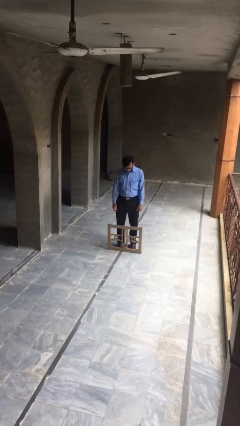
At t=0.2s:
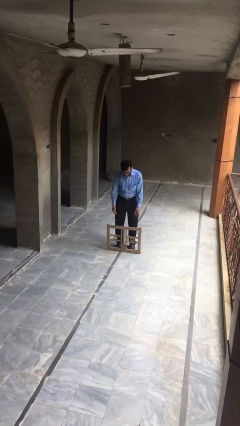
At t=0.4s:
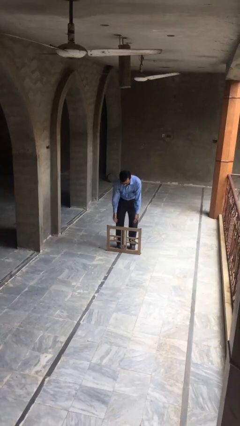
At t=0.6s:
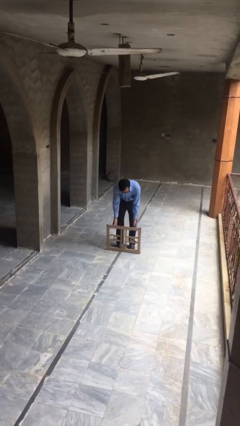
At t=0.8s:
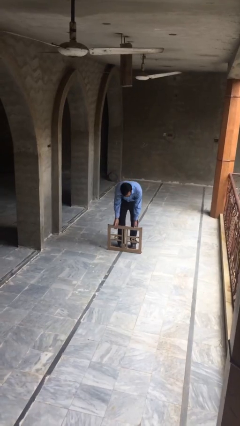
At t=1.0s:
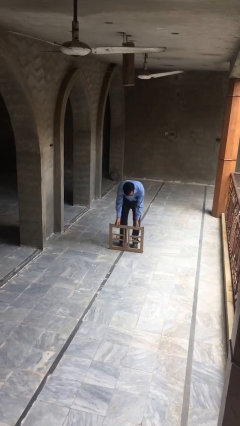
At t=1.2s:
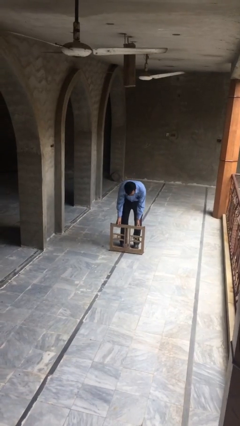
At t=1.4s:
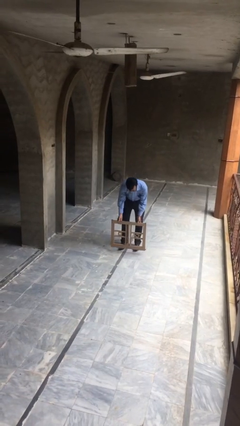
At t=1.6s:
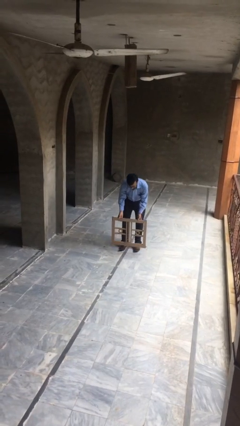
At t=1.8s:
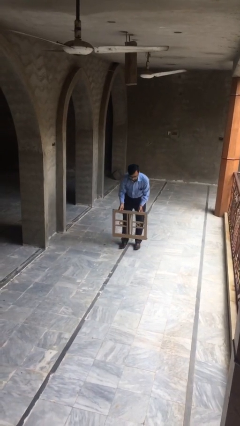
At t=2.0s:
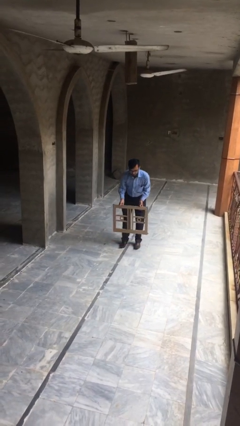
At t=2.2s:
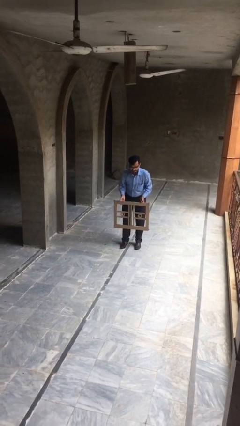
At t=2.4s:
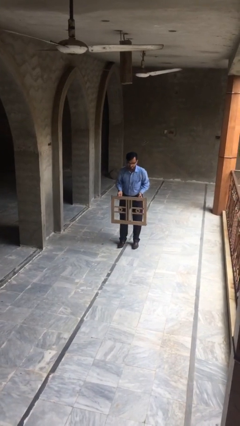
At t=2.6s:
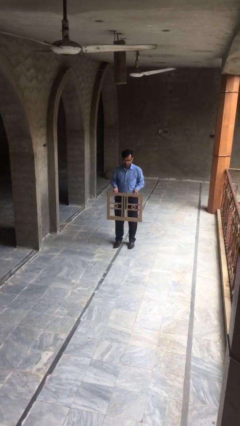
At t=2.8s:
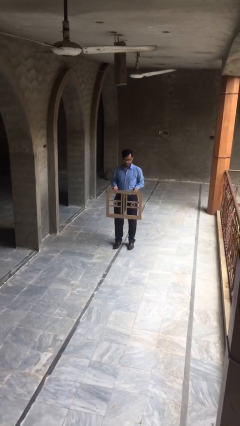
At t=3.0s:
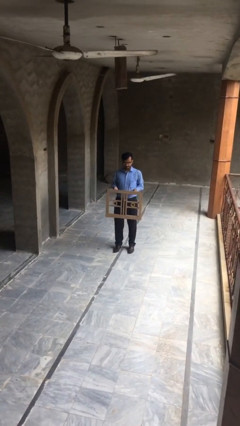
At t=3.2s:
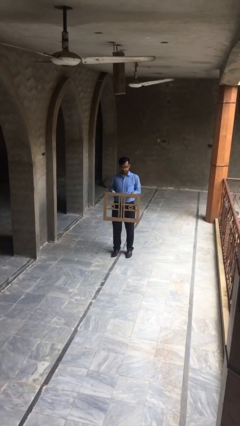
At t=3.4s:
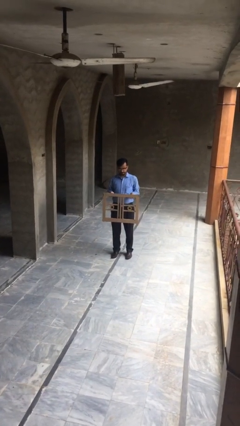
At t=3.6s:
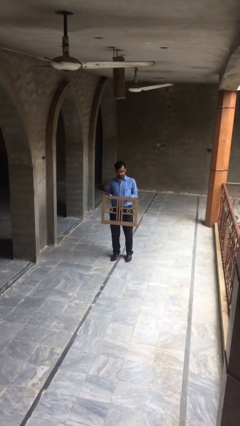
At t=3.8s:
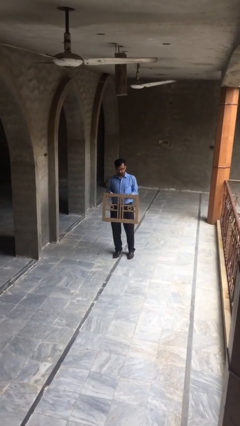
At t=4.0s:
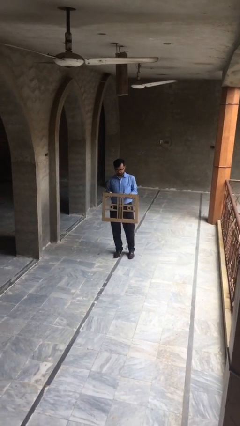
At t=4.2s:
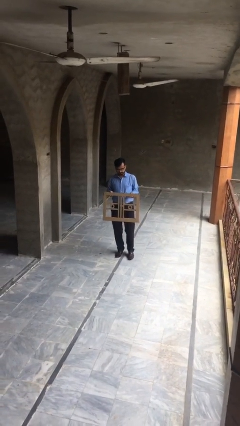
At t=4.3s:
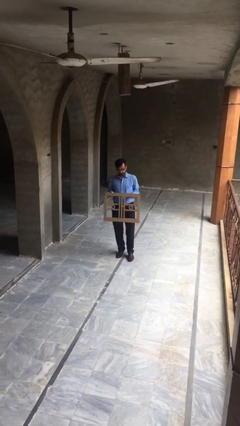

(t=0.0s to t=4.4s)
person picks up object from floor

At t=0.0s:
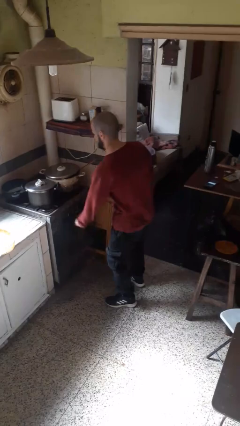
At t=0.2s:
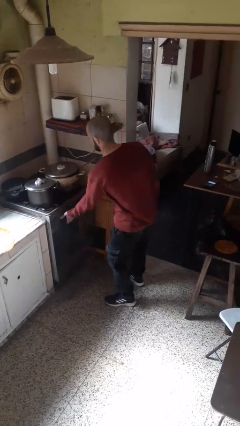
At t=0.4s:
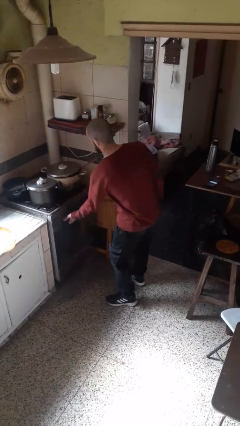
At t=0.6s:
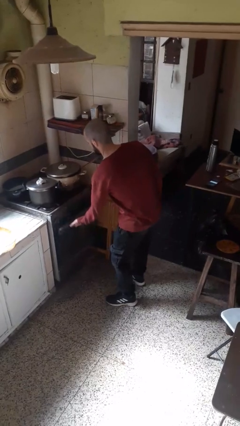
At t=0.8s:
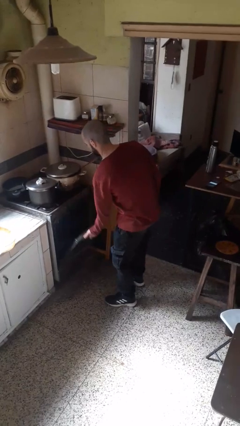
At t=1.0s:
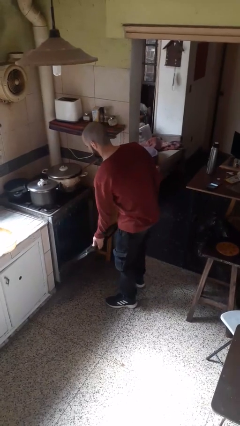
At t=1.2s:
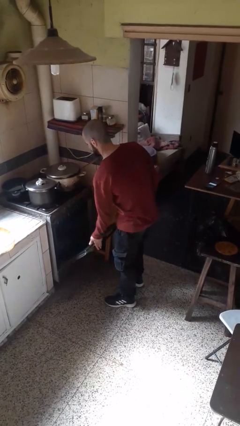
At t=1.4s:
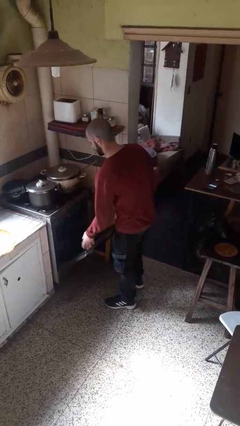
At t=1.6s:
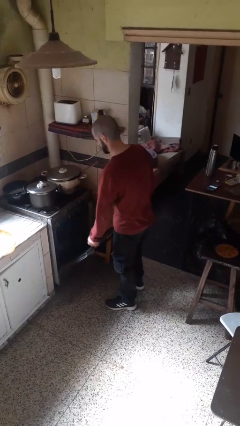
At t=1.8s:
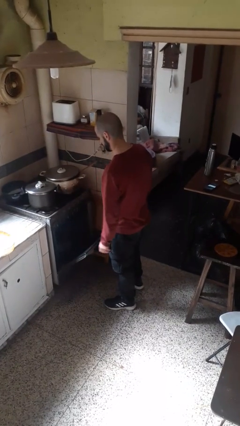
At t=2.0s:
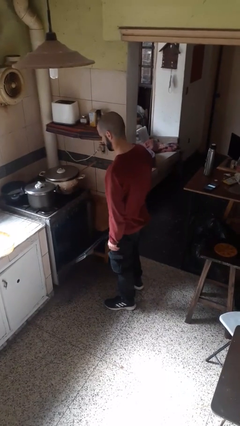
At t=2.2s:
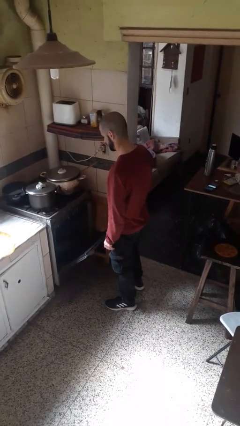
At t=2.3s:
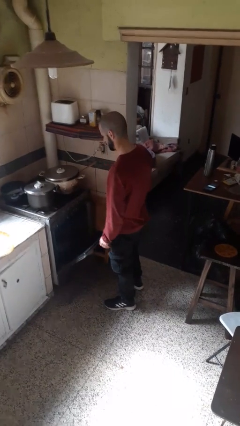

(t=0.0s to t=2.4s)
person opens oven door

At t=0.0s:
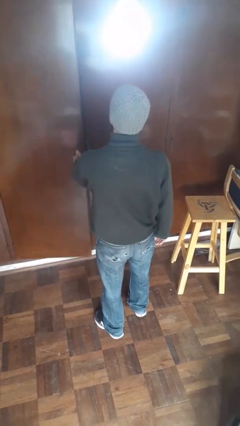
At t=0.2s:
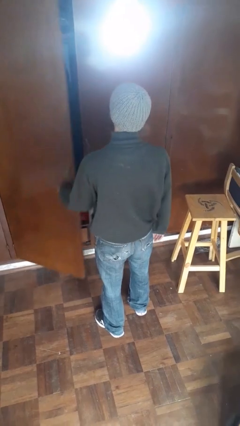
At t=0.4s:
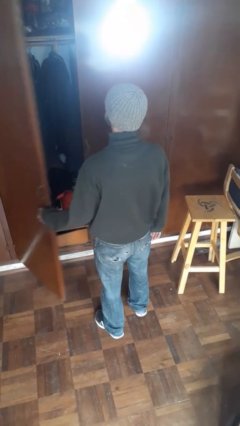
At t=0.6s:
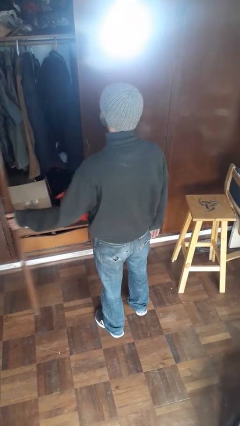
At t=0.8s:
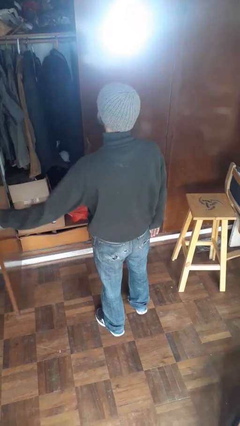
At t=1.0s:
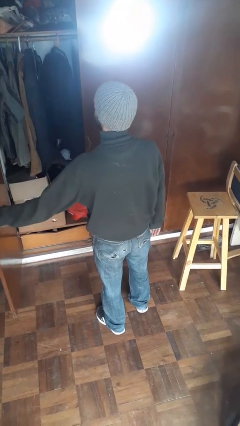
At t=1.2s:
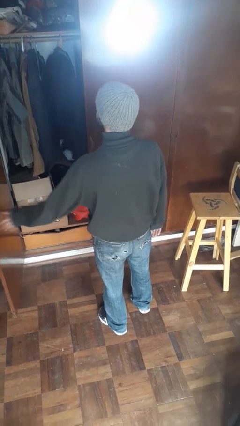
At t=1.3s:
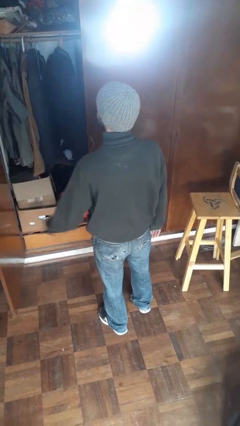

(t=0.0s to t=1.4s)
person opens closet door

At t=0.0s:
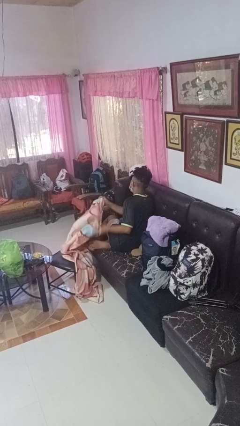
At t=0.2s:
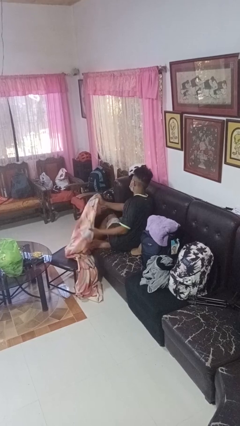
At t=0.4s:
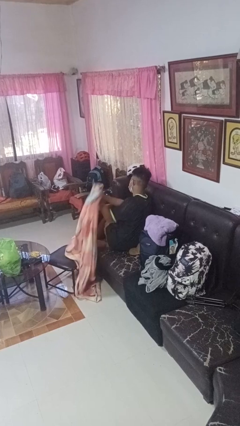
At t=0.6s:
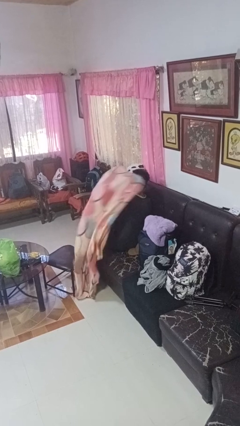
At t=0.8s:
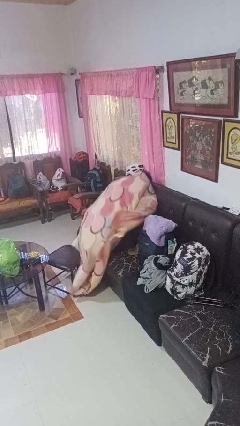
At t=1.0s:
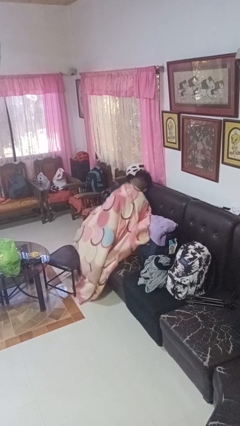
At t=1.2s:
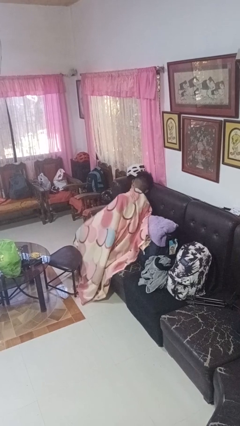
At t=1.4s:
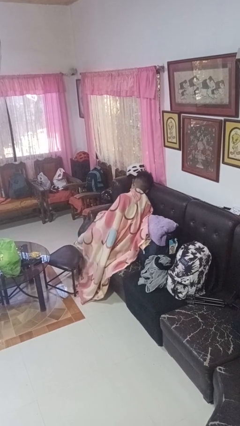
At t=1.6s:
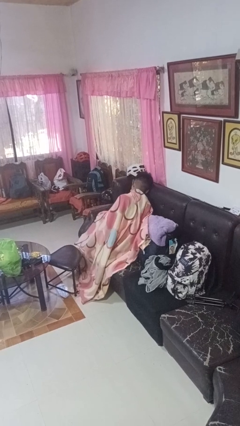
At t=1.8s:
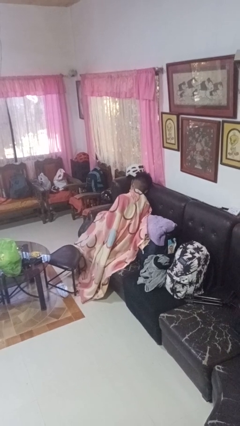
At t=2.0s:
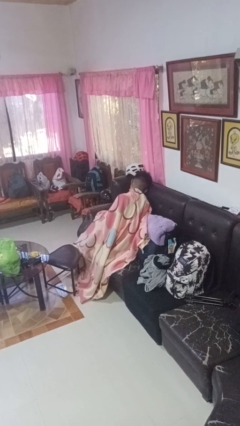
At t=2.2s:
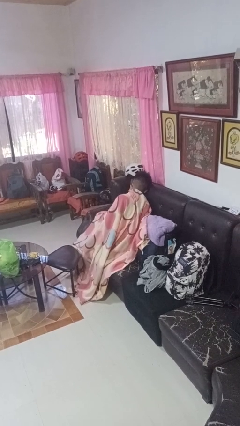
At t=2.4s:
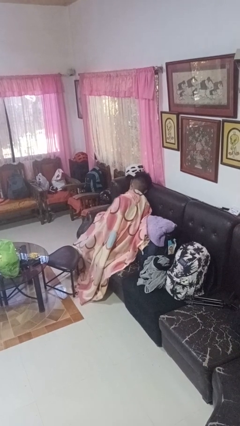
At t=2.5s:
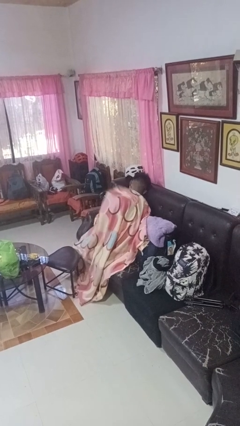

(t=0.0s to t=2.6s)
person covers with blanket

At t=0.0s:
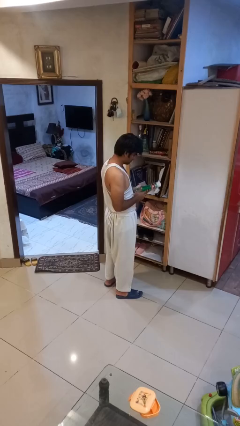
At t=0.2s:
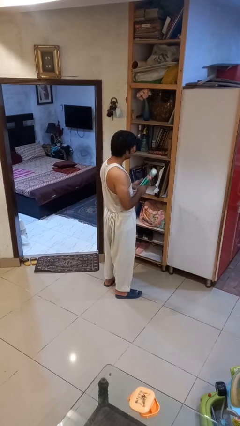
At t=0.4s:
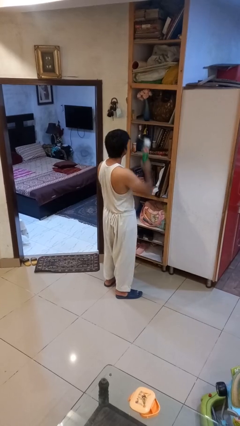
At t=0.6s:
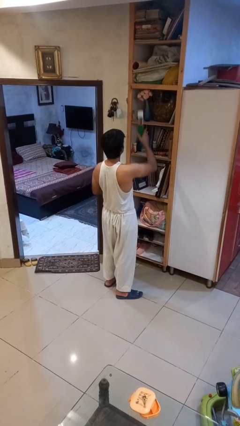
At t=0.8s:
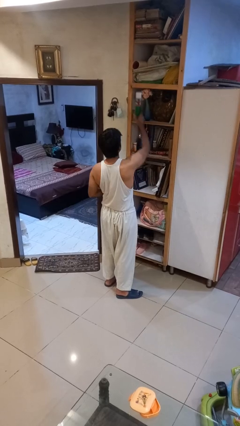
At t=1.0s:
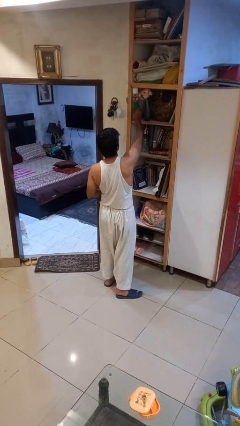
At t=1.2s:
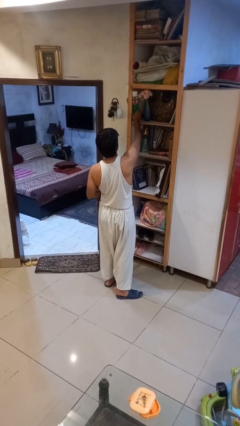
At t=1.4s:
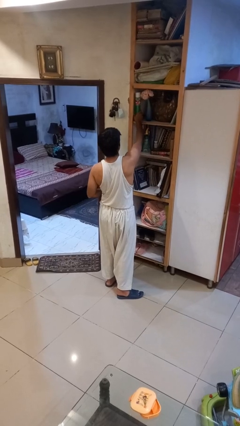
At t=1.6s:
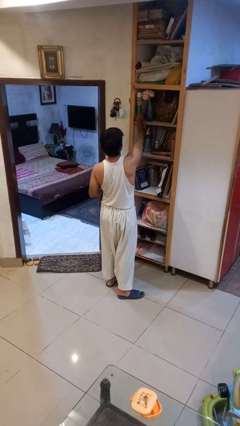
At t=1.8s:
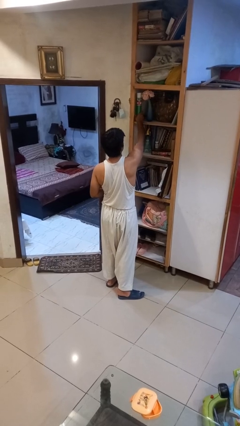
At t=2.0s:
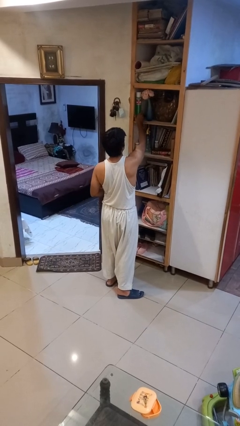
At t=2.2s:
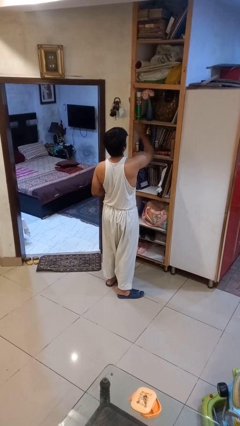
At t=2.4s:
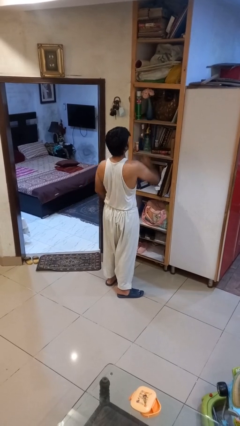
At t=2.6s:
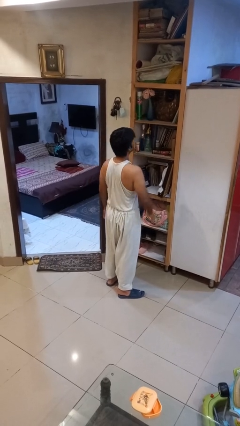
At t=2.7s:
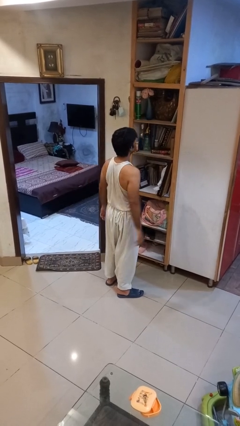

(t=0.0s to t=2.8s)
person puts down object on shelf

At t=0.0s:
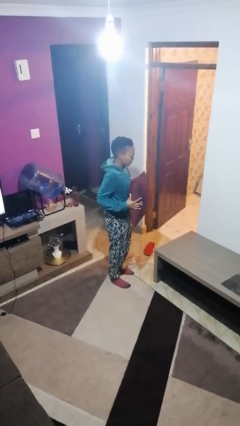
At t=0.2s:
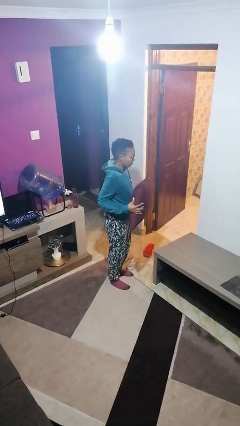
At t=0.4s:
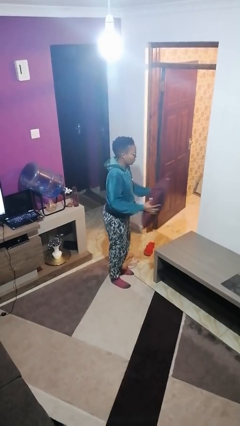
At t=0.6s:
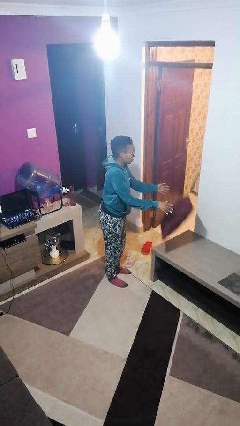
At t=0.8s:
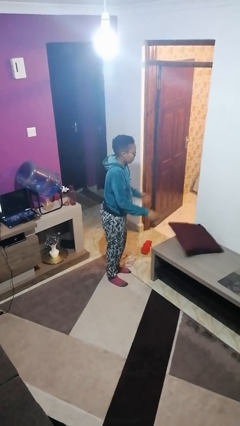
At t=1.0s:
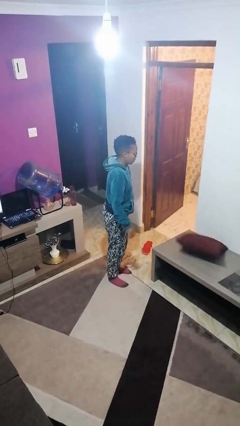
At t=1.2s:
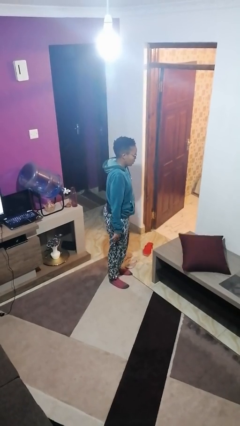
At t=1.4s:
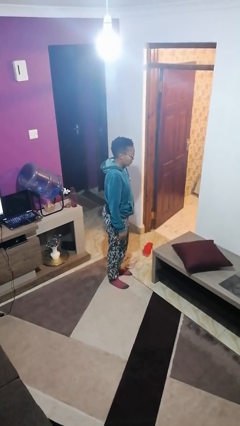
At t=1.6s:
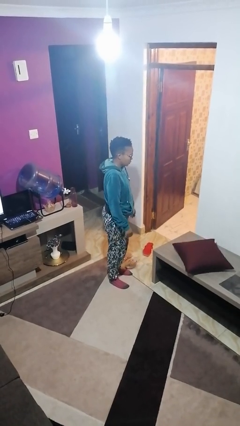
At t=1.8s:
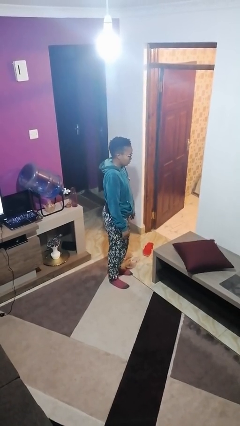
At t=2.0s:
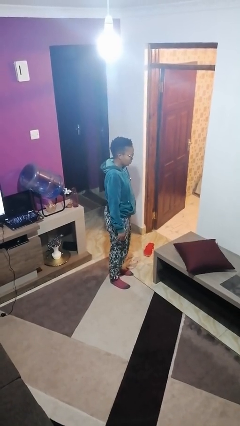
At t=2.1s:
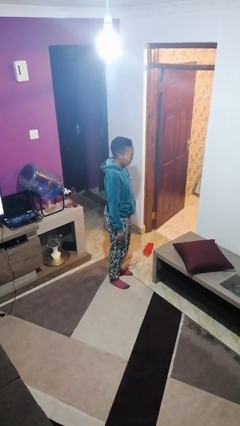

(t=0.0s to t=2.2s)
person throws object on table

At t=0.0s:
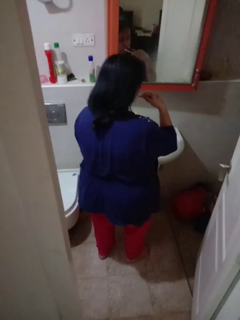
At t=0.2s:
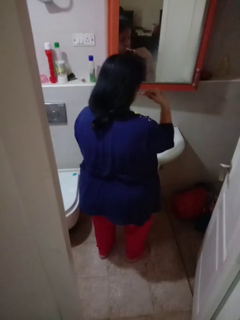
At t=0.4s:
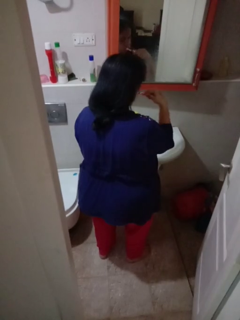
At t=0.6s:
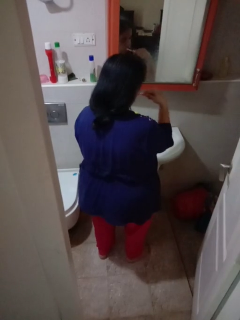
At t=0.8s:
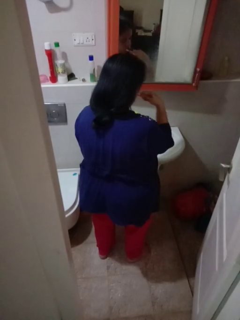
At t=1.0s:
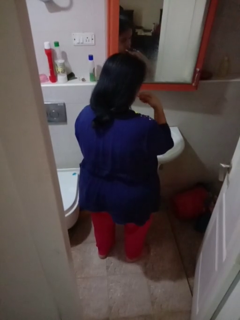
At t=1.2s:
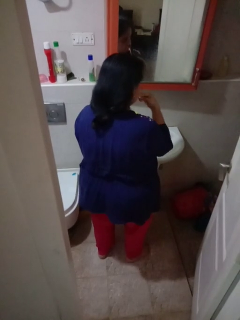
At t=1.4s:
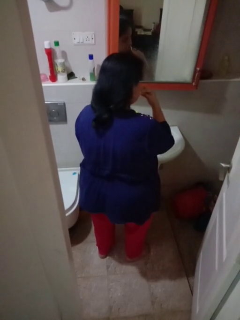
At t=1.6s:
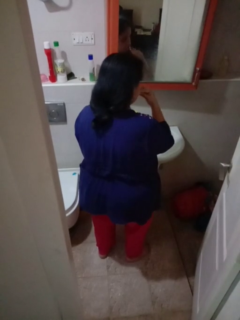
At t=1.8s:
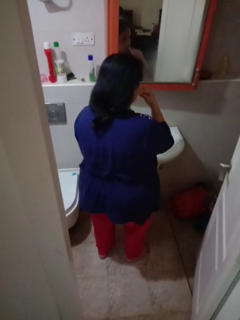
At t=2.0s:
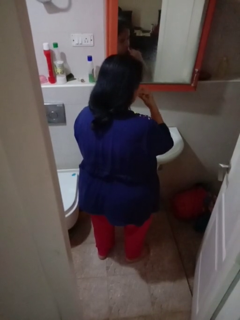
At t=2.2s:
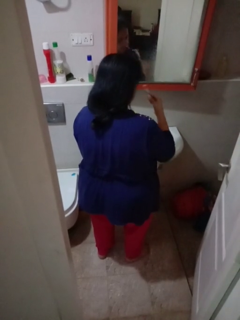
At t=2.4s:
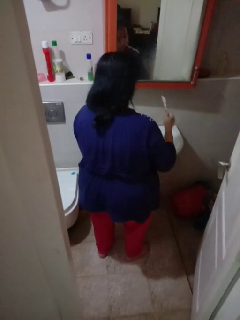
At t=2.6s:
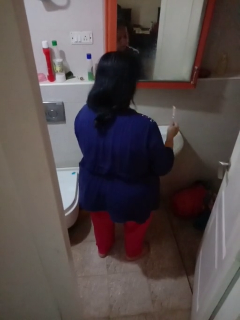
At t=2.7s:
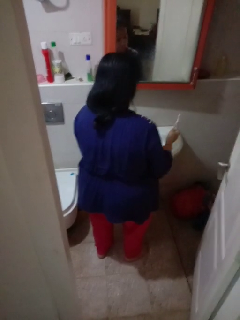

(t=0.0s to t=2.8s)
person brushes teeth
